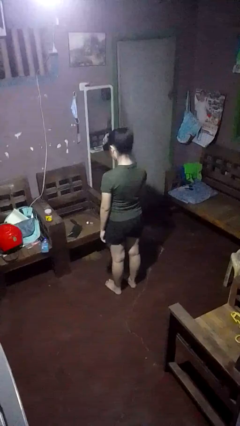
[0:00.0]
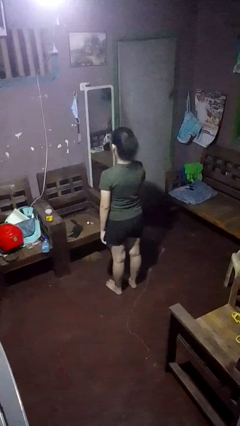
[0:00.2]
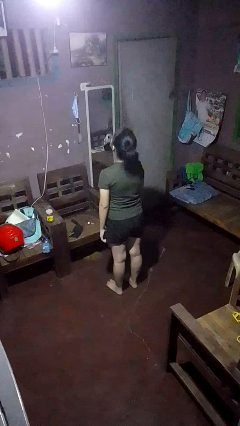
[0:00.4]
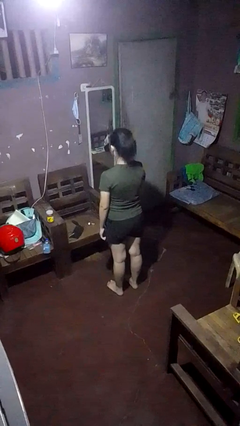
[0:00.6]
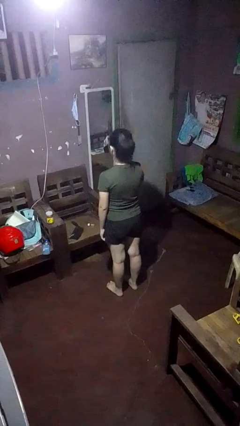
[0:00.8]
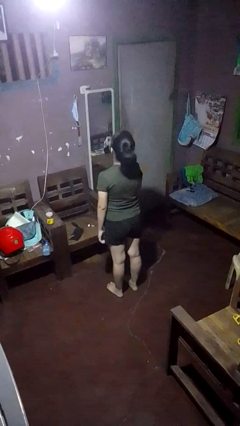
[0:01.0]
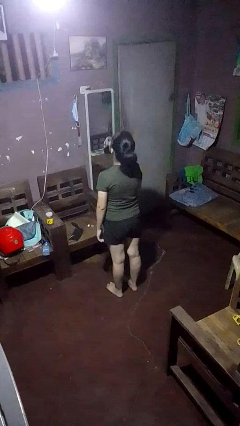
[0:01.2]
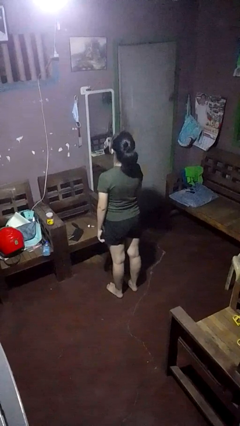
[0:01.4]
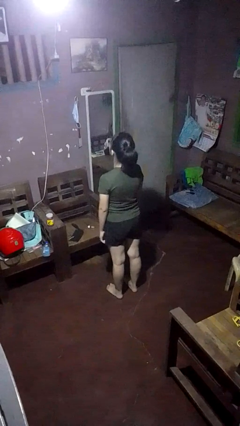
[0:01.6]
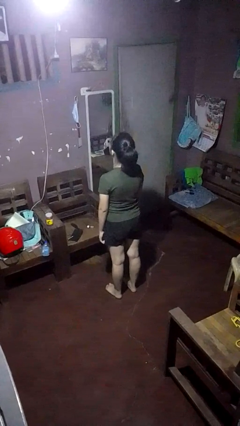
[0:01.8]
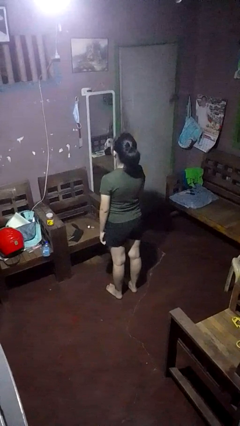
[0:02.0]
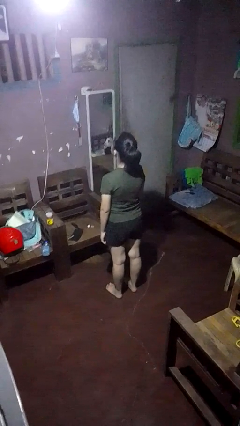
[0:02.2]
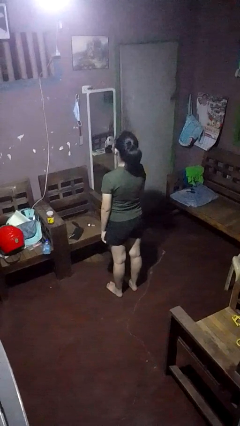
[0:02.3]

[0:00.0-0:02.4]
person nods head

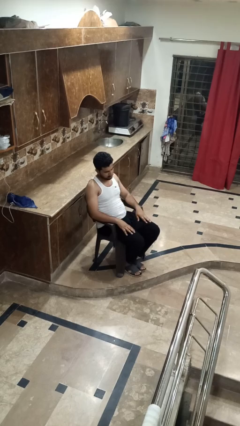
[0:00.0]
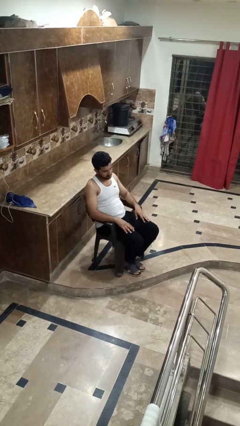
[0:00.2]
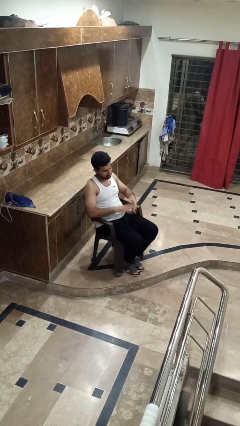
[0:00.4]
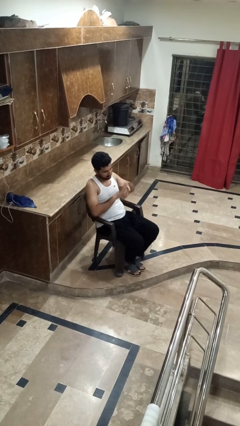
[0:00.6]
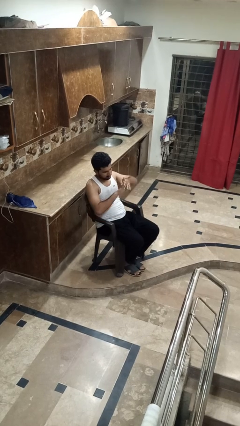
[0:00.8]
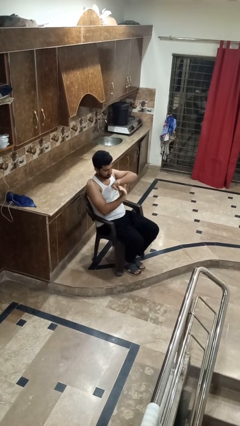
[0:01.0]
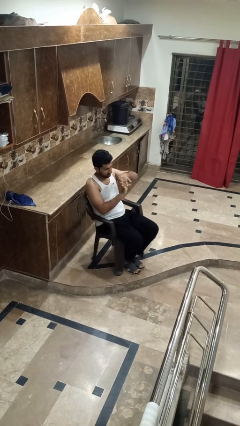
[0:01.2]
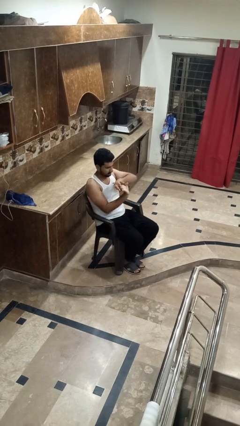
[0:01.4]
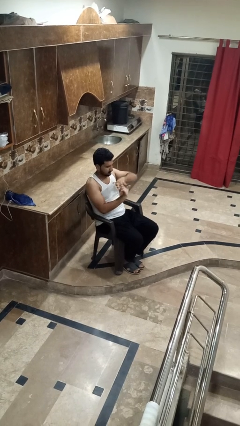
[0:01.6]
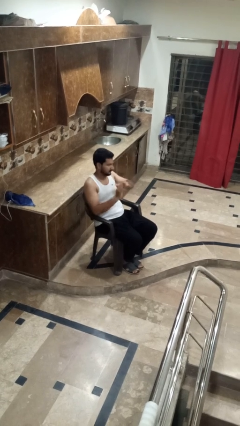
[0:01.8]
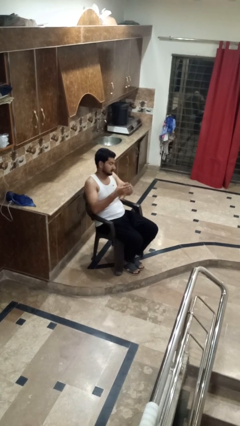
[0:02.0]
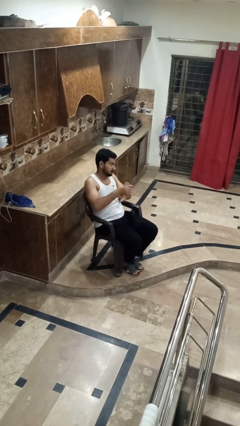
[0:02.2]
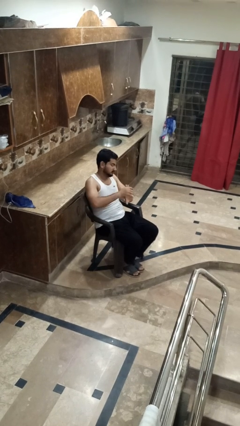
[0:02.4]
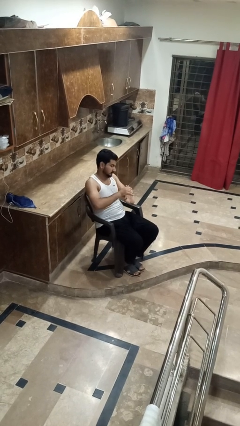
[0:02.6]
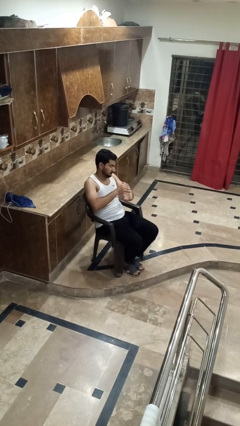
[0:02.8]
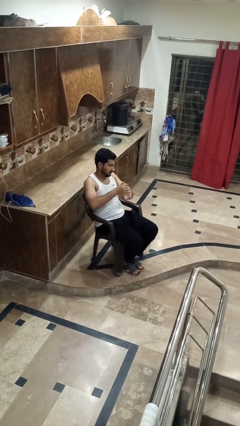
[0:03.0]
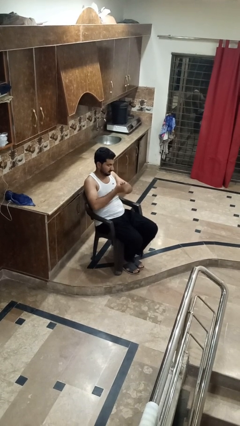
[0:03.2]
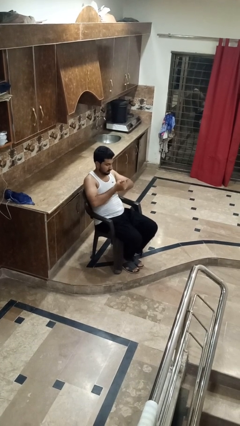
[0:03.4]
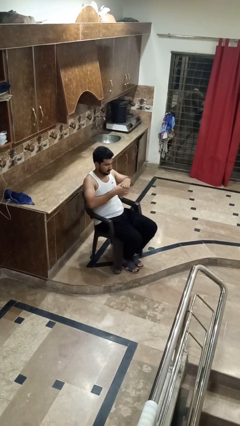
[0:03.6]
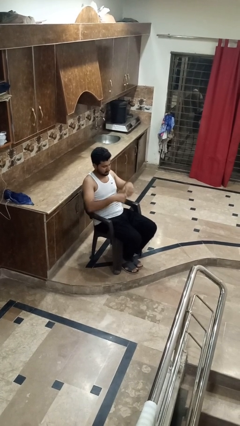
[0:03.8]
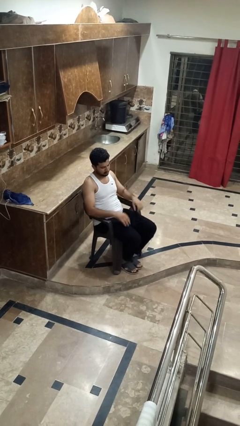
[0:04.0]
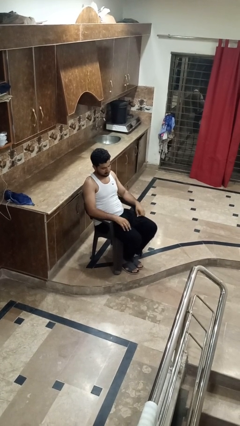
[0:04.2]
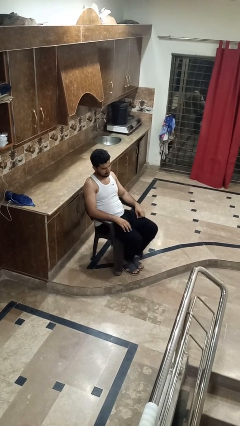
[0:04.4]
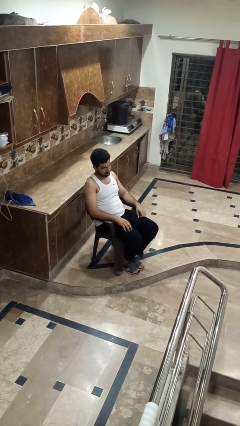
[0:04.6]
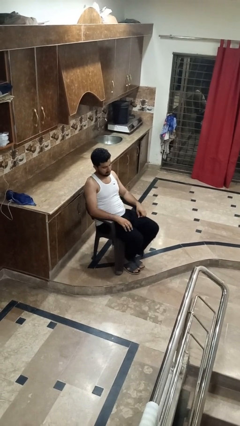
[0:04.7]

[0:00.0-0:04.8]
person cracks knuckles

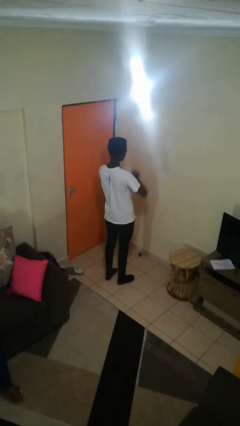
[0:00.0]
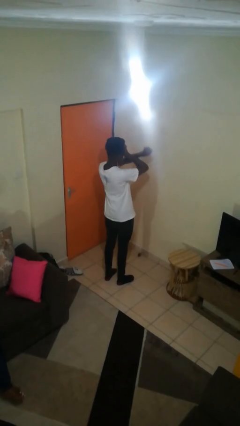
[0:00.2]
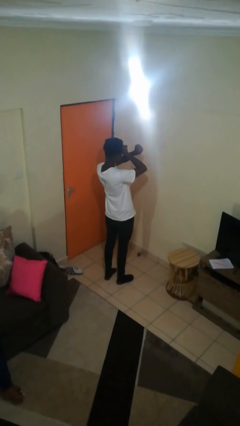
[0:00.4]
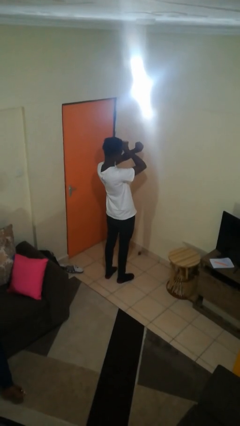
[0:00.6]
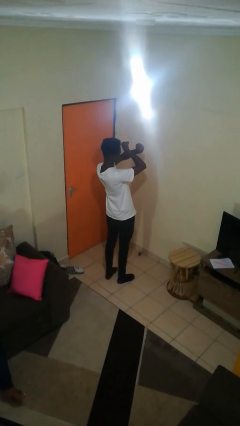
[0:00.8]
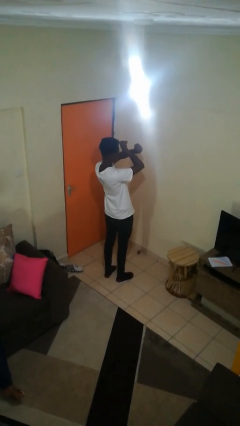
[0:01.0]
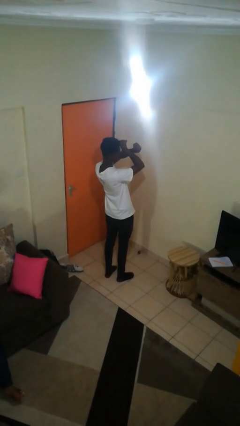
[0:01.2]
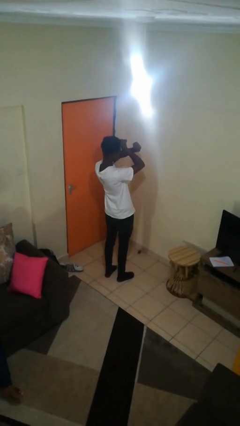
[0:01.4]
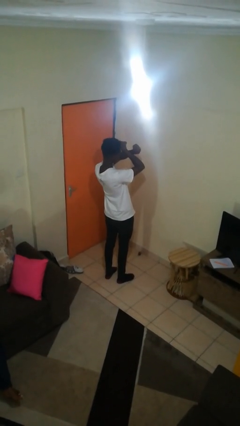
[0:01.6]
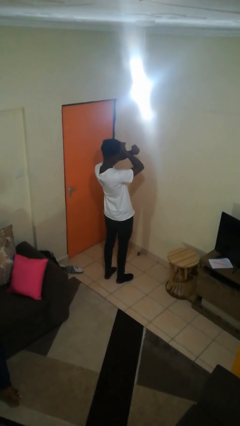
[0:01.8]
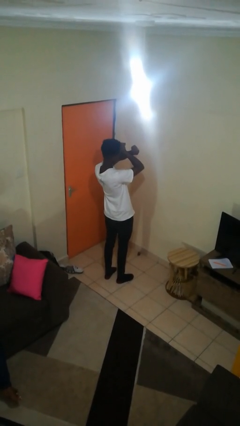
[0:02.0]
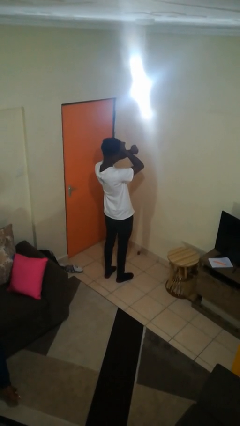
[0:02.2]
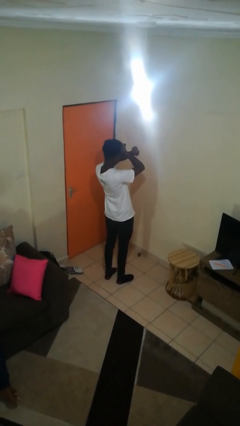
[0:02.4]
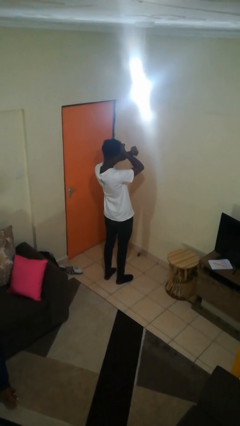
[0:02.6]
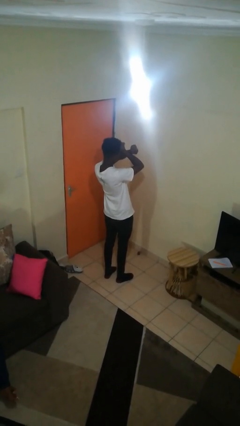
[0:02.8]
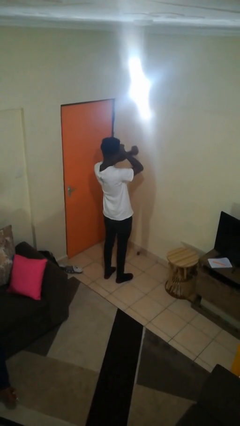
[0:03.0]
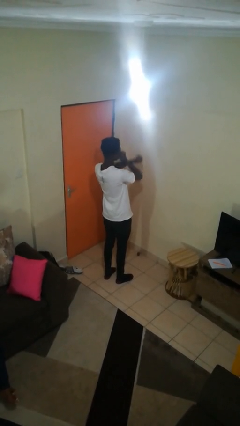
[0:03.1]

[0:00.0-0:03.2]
person gestures arms x

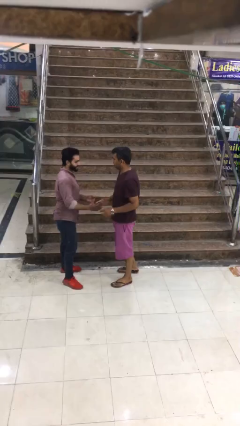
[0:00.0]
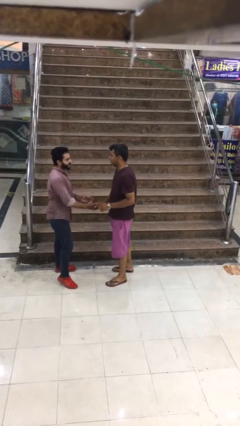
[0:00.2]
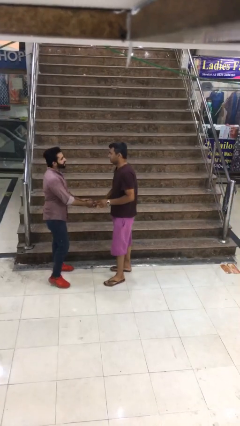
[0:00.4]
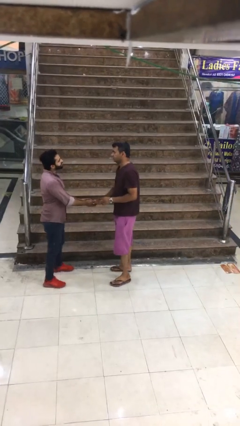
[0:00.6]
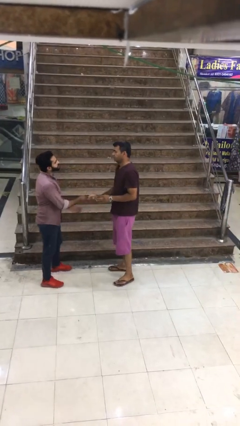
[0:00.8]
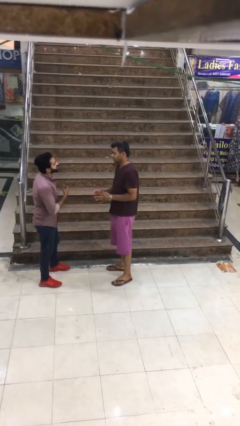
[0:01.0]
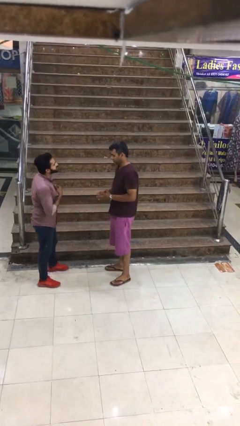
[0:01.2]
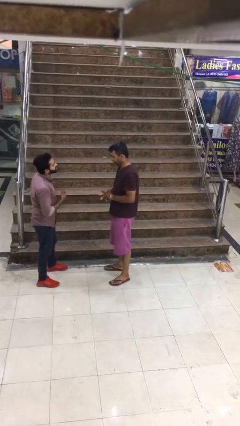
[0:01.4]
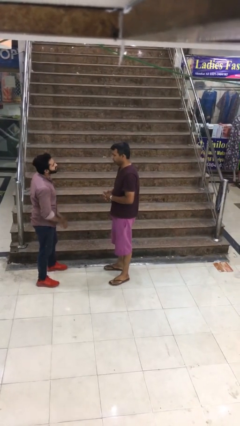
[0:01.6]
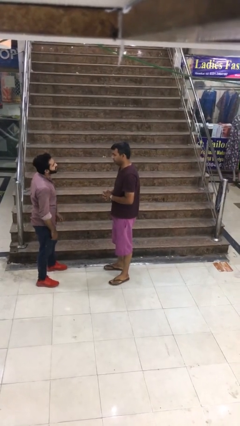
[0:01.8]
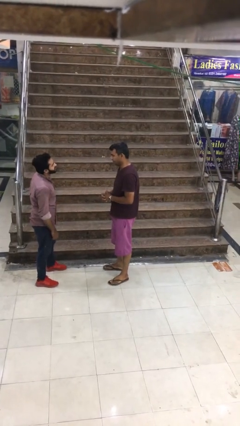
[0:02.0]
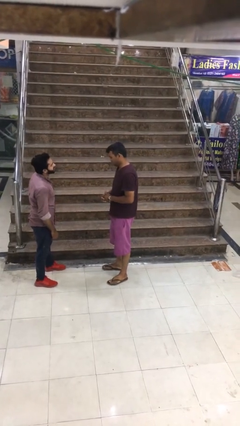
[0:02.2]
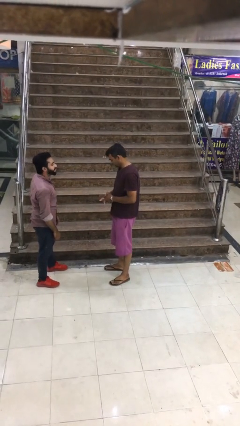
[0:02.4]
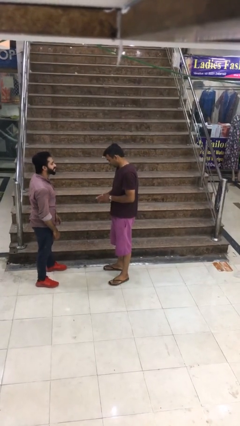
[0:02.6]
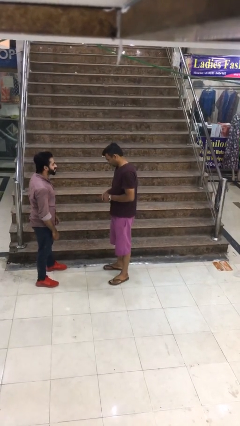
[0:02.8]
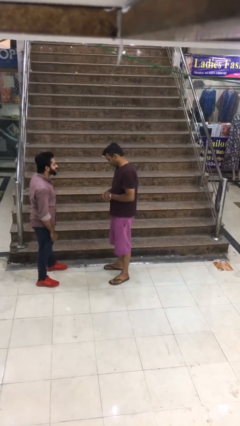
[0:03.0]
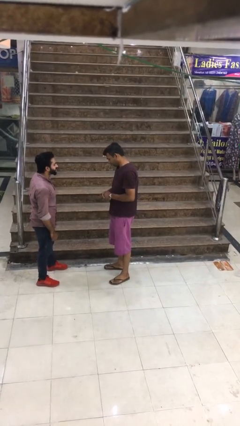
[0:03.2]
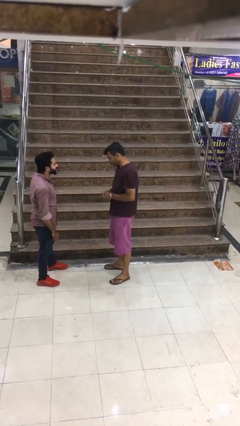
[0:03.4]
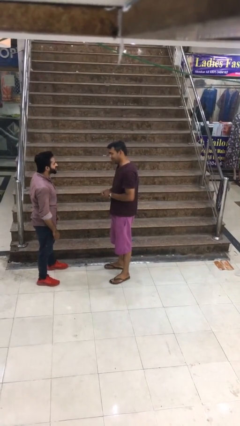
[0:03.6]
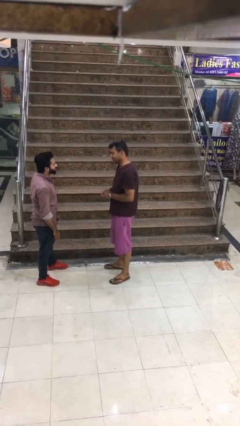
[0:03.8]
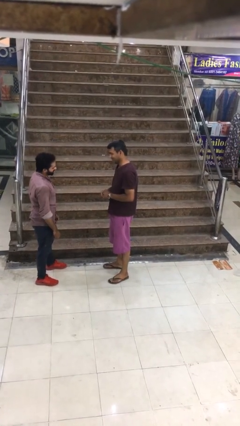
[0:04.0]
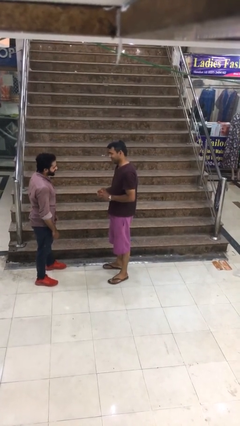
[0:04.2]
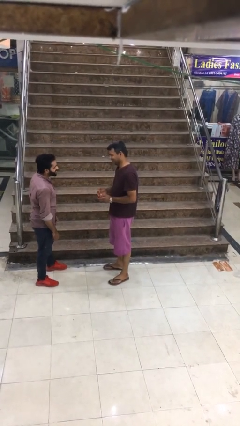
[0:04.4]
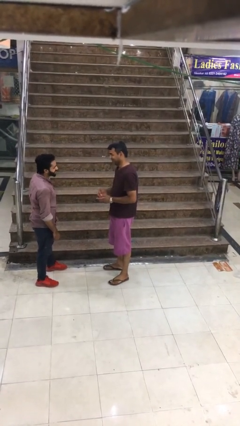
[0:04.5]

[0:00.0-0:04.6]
person talks to person

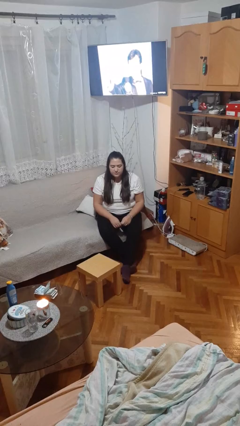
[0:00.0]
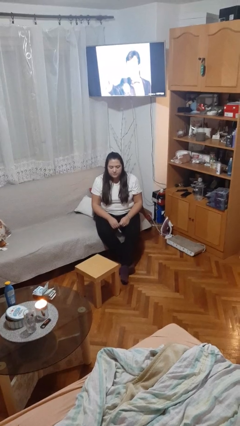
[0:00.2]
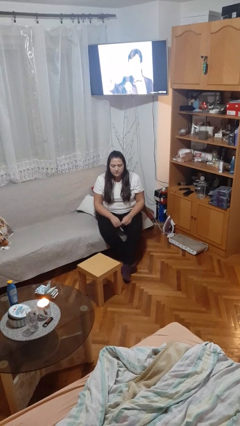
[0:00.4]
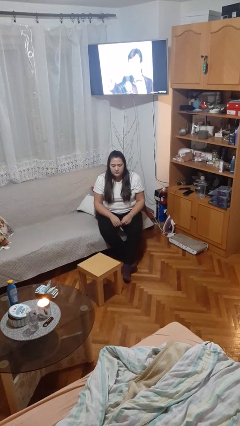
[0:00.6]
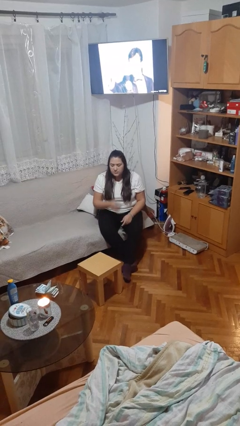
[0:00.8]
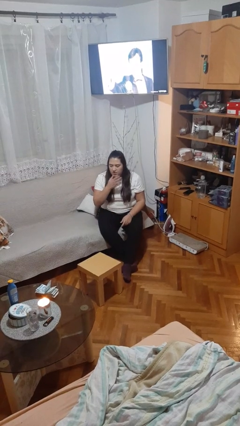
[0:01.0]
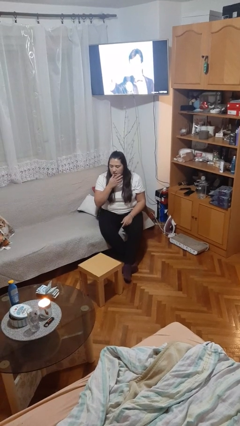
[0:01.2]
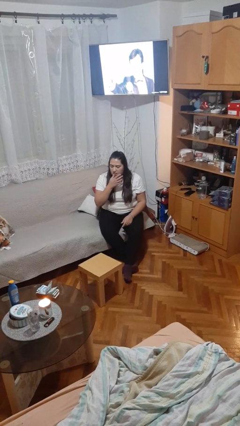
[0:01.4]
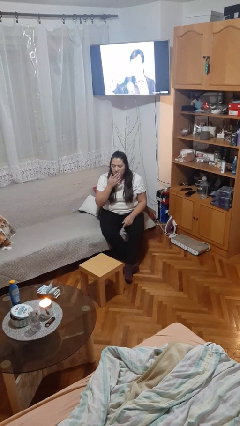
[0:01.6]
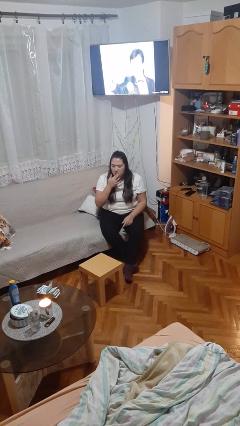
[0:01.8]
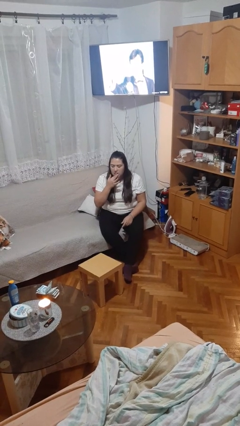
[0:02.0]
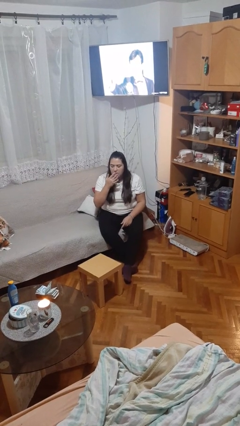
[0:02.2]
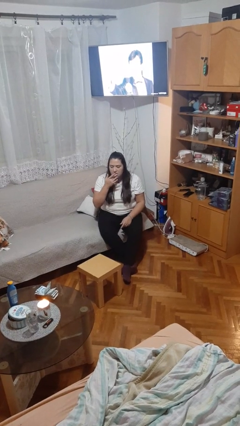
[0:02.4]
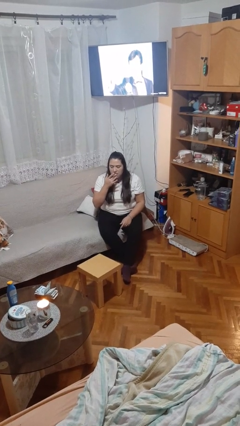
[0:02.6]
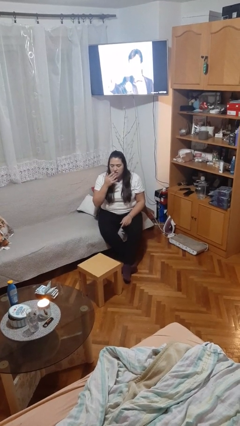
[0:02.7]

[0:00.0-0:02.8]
person licks fingers
